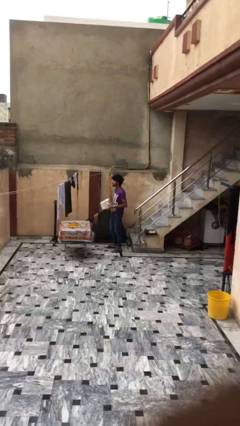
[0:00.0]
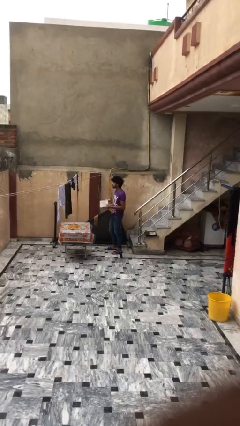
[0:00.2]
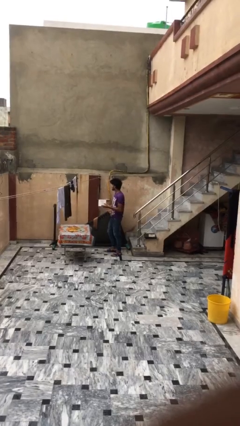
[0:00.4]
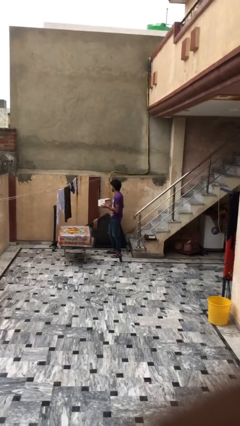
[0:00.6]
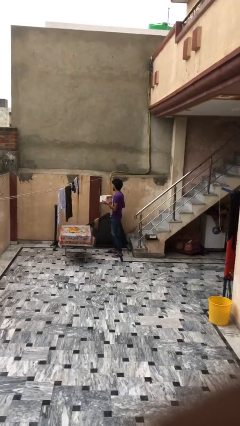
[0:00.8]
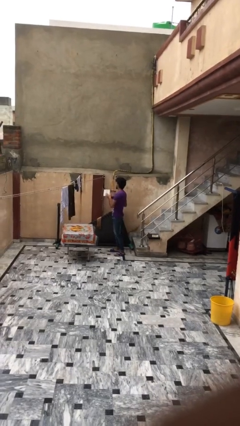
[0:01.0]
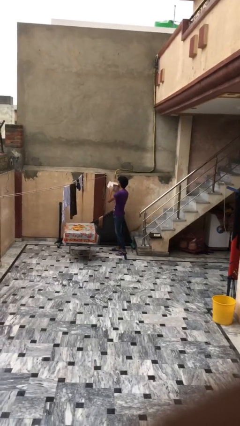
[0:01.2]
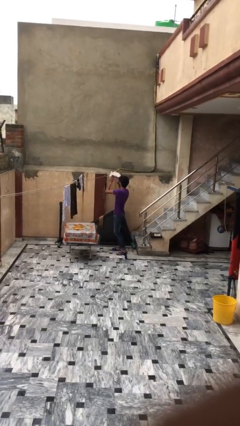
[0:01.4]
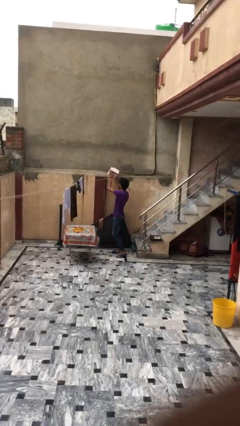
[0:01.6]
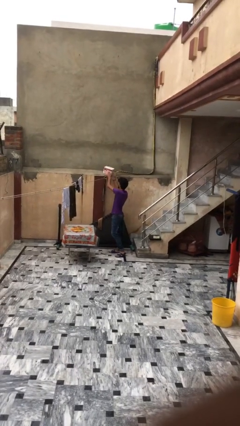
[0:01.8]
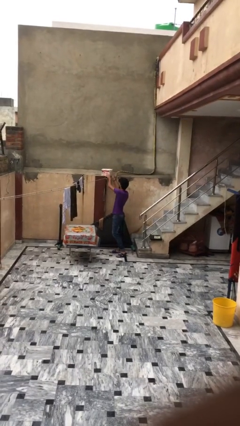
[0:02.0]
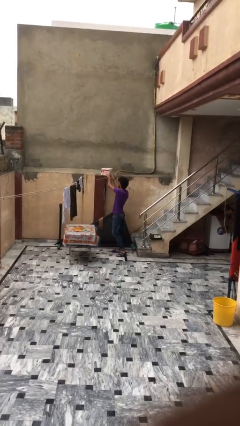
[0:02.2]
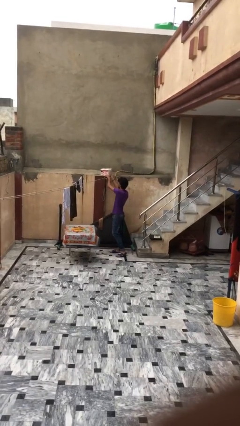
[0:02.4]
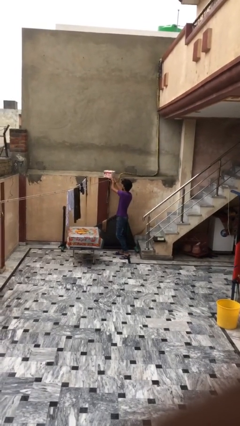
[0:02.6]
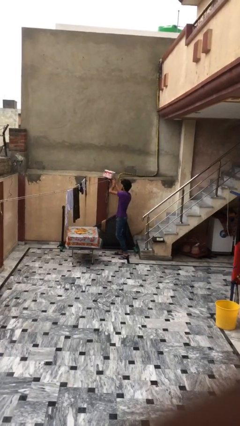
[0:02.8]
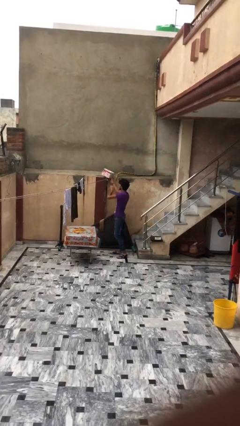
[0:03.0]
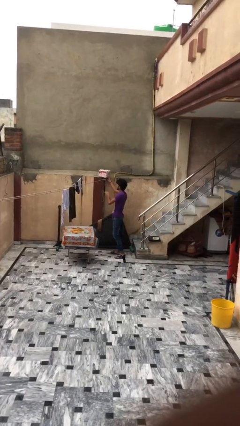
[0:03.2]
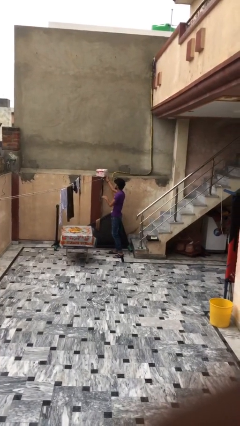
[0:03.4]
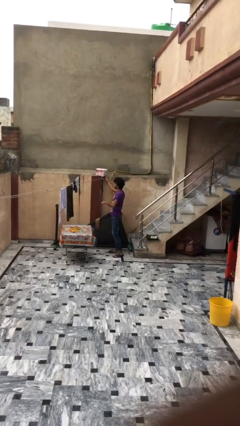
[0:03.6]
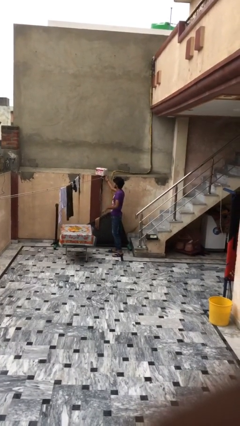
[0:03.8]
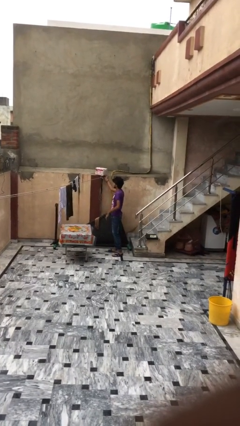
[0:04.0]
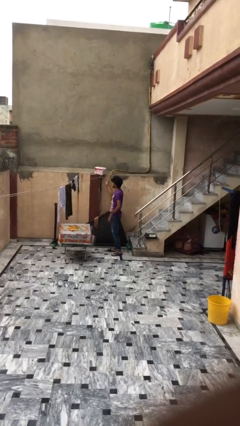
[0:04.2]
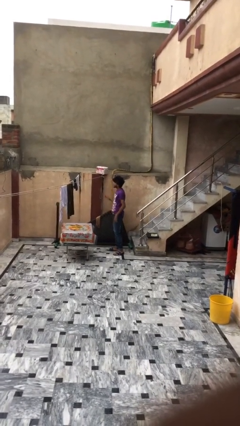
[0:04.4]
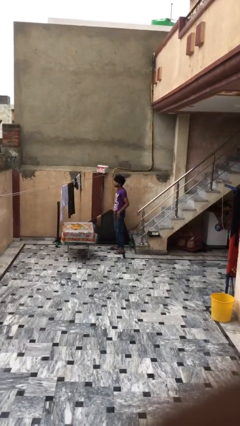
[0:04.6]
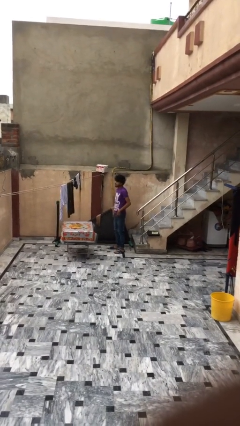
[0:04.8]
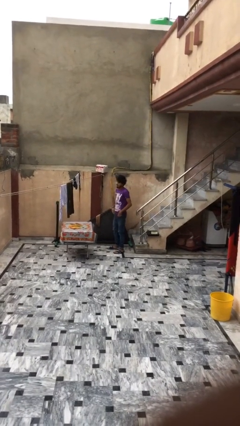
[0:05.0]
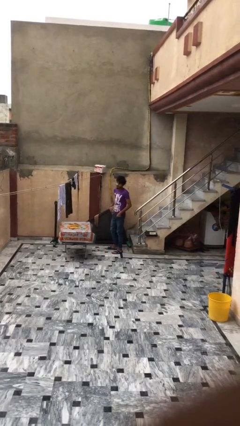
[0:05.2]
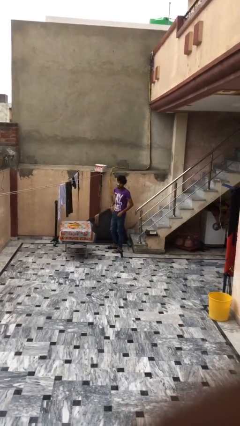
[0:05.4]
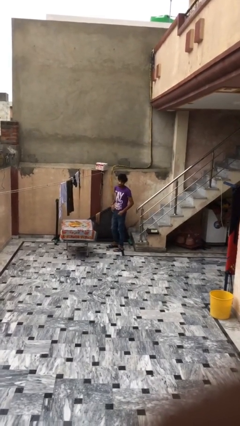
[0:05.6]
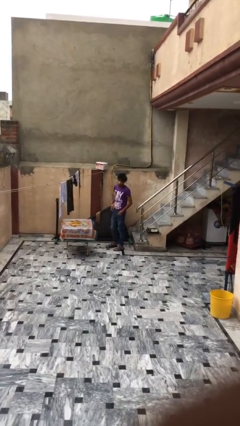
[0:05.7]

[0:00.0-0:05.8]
person puts down object on shelf

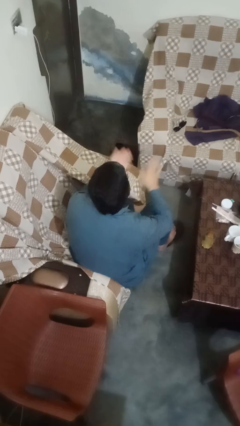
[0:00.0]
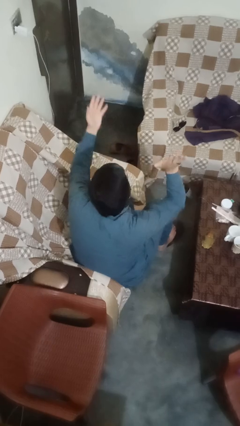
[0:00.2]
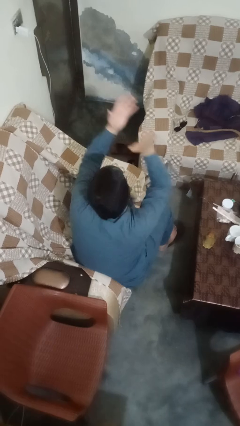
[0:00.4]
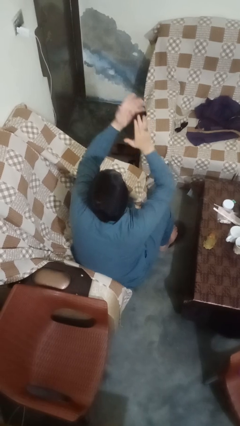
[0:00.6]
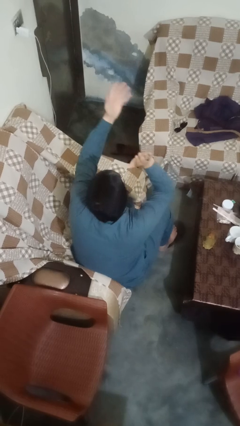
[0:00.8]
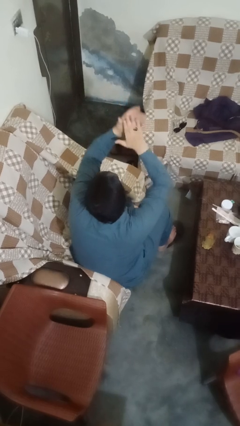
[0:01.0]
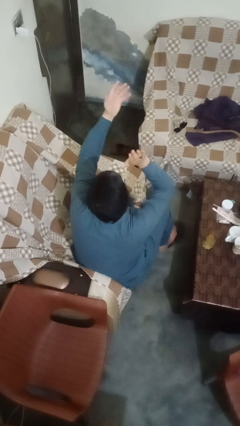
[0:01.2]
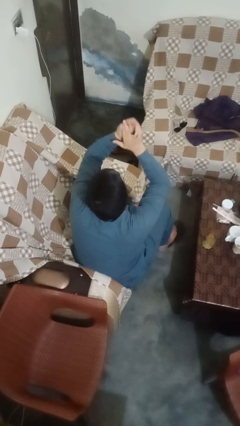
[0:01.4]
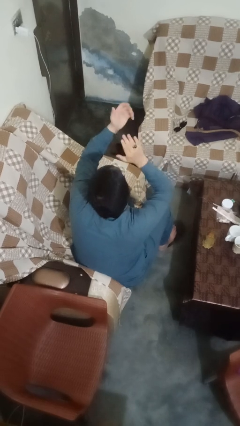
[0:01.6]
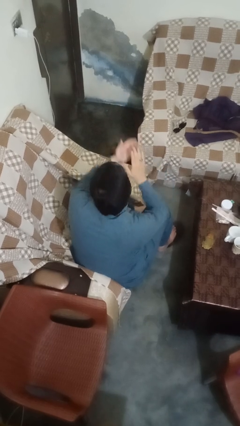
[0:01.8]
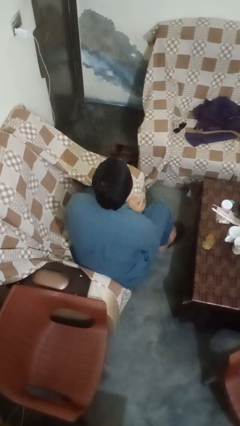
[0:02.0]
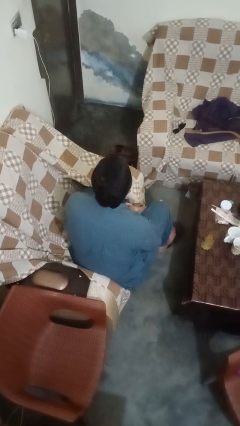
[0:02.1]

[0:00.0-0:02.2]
person claps hands

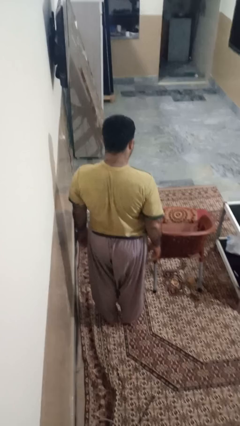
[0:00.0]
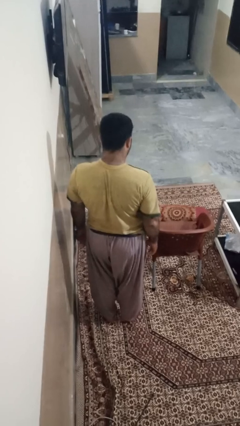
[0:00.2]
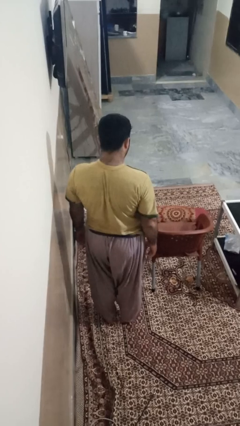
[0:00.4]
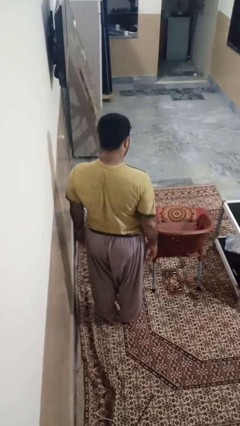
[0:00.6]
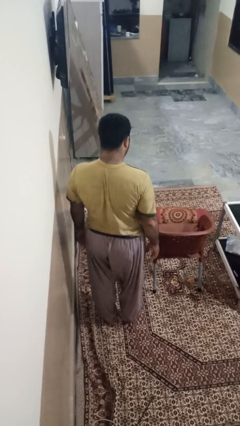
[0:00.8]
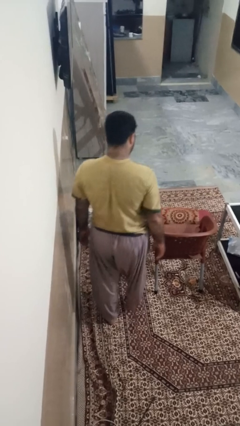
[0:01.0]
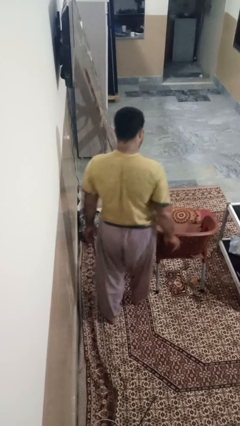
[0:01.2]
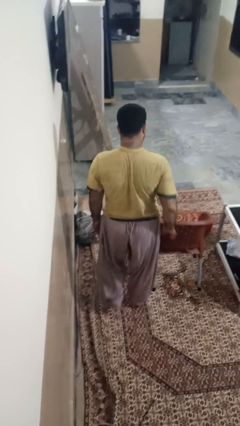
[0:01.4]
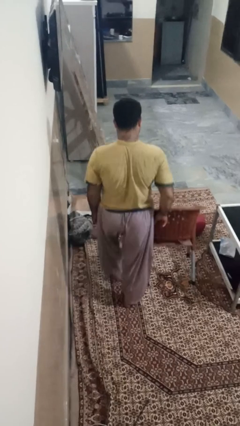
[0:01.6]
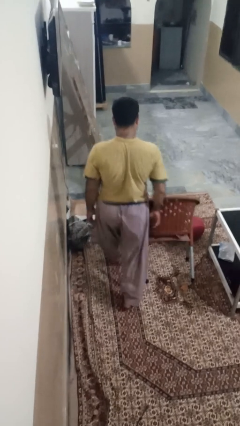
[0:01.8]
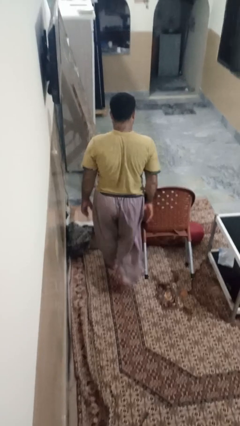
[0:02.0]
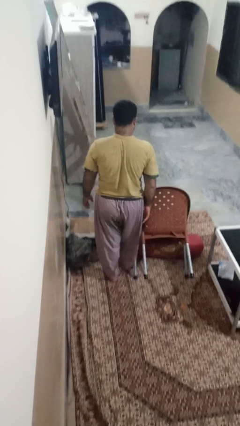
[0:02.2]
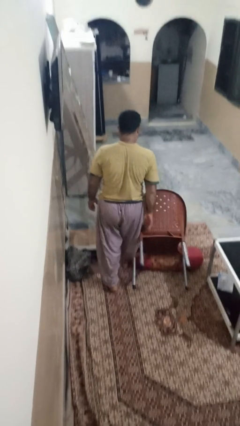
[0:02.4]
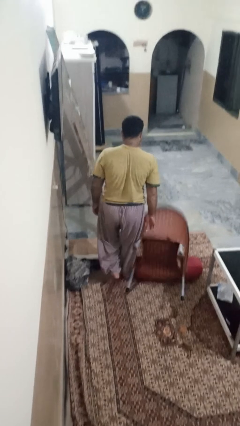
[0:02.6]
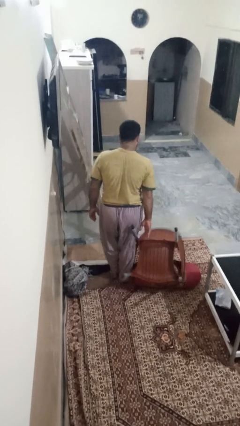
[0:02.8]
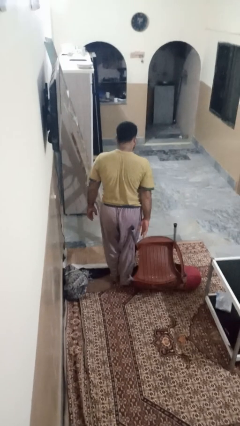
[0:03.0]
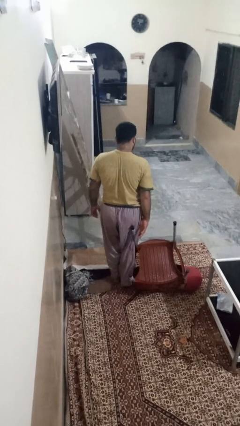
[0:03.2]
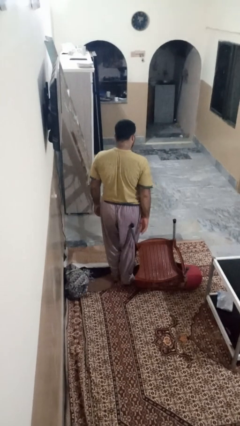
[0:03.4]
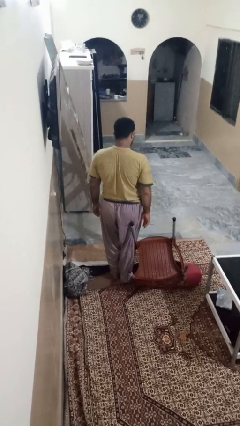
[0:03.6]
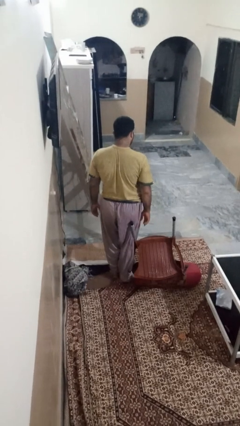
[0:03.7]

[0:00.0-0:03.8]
person knocks over furniture

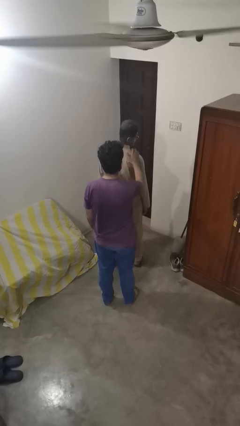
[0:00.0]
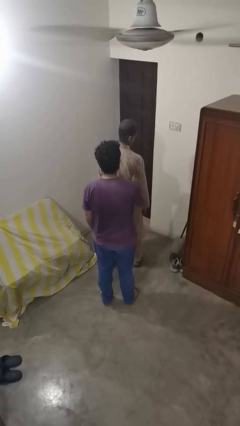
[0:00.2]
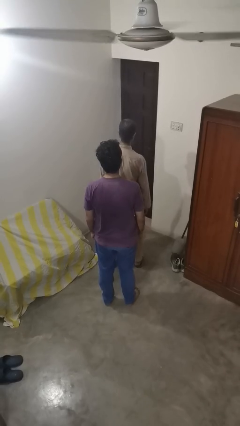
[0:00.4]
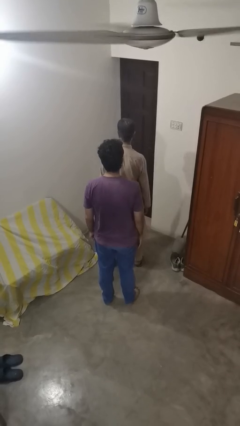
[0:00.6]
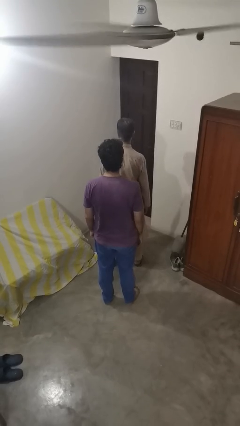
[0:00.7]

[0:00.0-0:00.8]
person spins person around

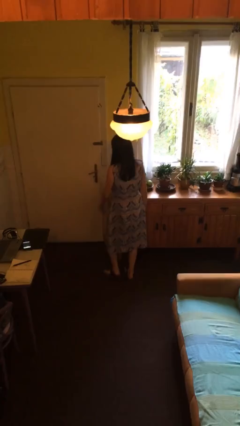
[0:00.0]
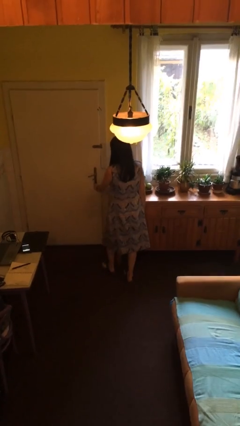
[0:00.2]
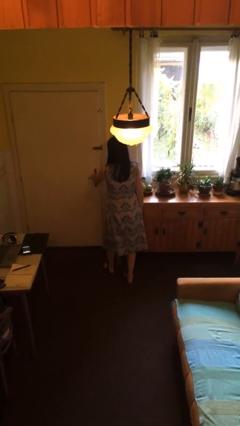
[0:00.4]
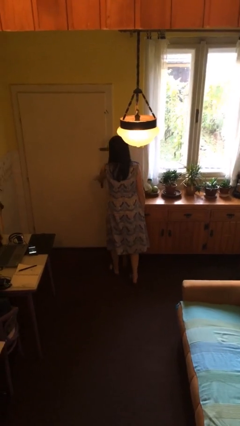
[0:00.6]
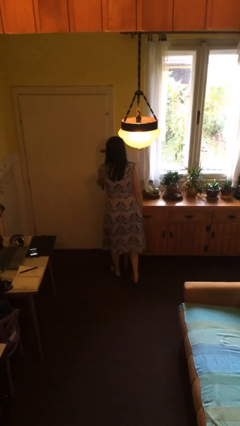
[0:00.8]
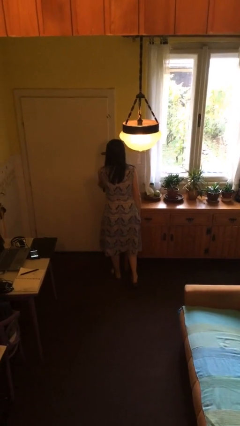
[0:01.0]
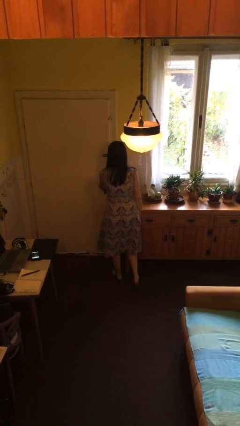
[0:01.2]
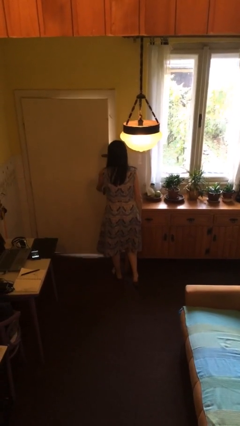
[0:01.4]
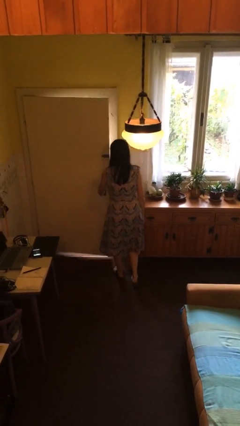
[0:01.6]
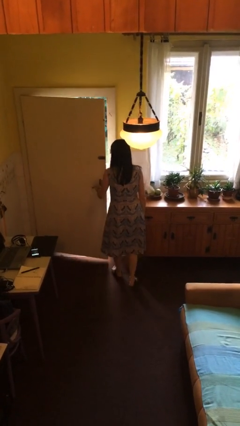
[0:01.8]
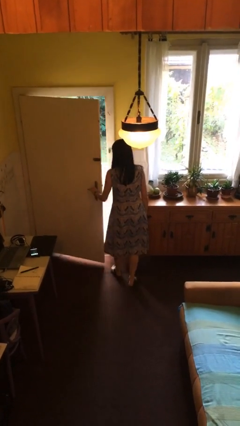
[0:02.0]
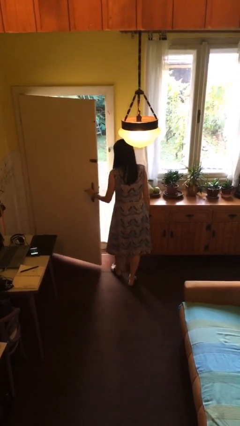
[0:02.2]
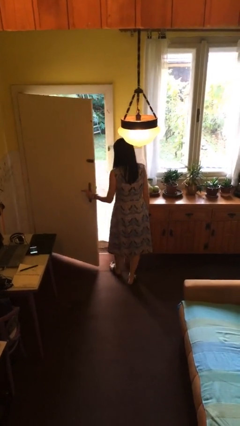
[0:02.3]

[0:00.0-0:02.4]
person opens facility door

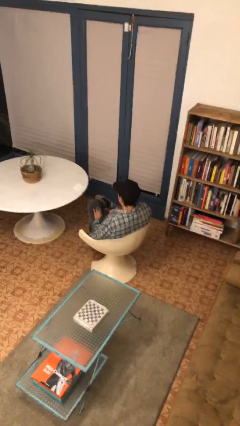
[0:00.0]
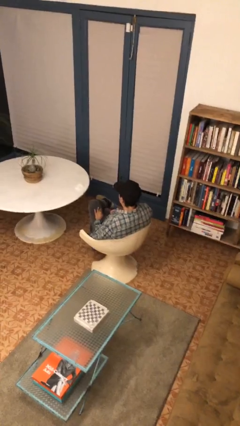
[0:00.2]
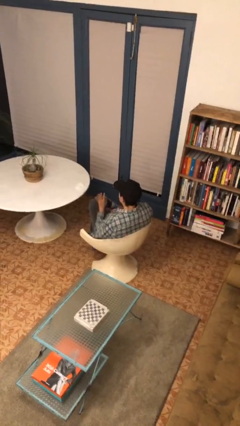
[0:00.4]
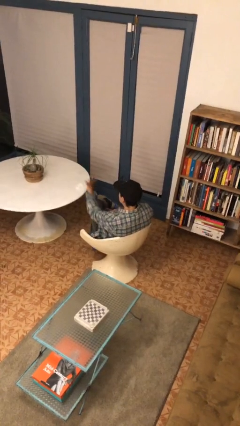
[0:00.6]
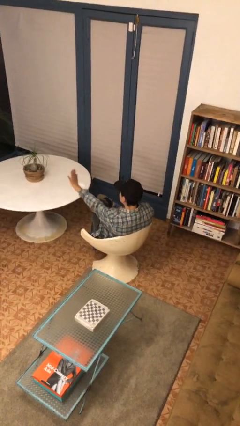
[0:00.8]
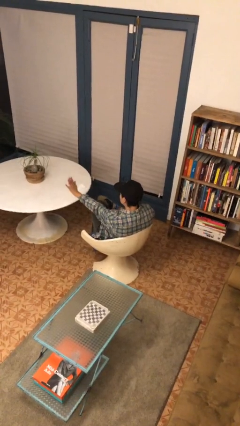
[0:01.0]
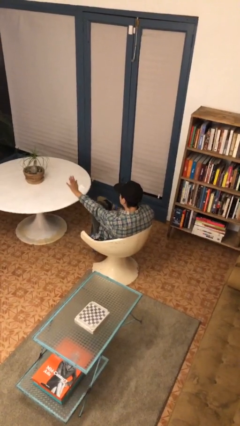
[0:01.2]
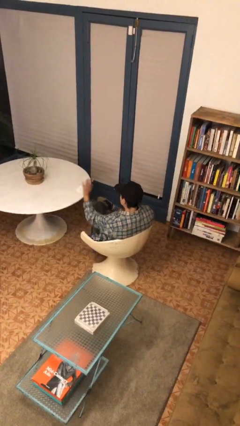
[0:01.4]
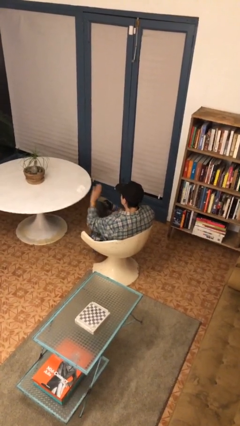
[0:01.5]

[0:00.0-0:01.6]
person gestures stop

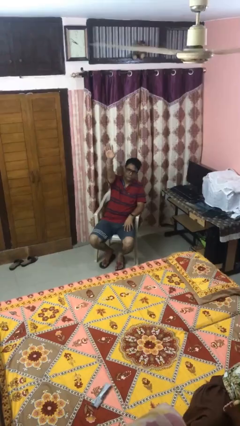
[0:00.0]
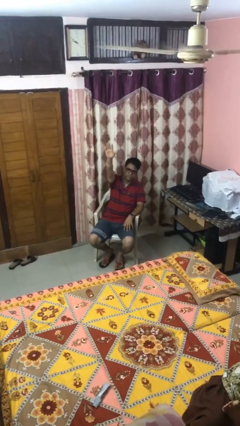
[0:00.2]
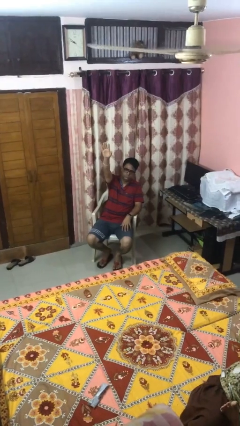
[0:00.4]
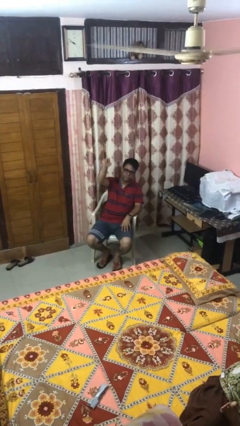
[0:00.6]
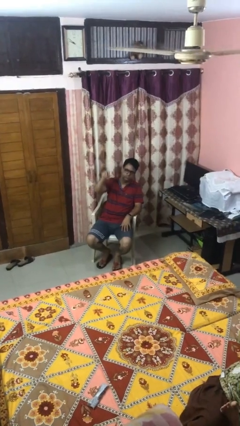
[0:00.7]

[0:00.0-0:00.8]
person gestures lower hand
